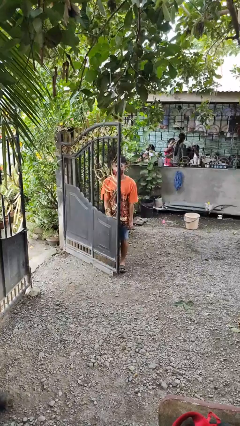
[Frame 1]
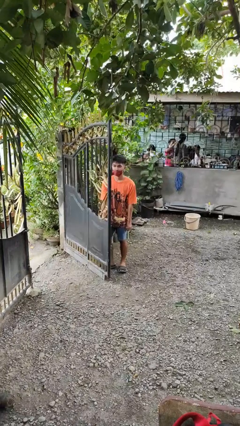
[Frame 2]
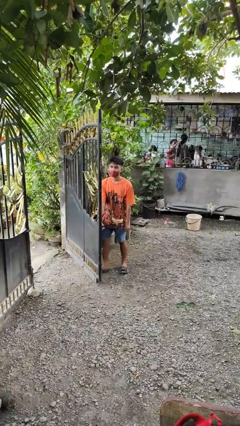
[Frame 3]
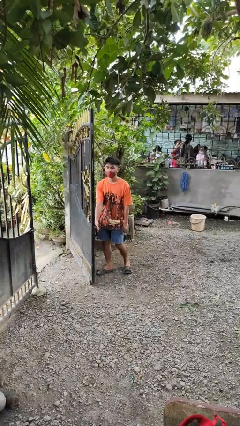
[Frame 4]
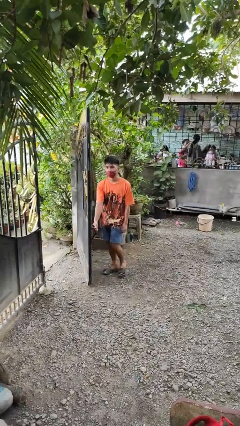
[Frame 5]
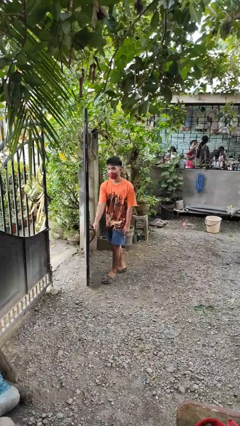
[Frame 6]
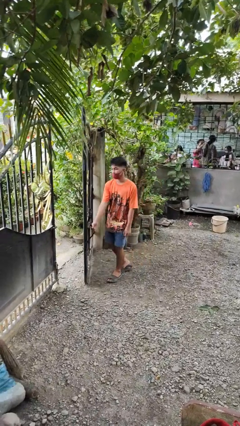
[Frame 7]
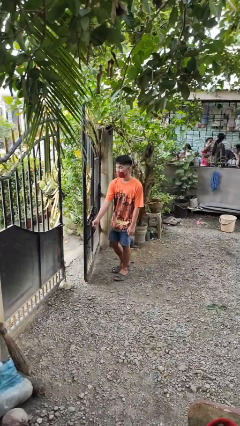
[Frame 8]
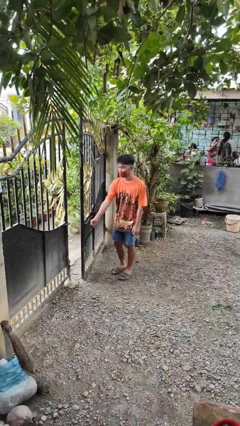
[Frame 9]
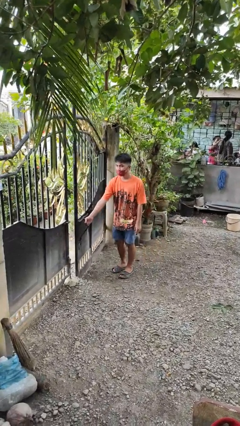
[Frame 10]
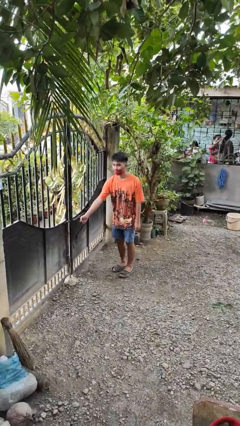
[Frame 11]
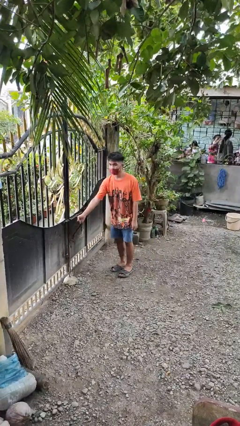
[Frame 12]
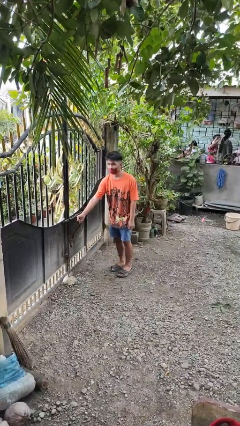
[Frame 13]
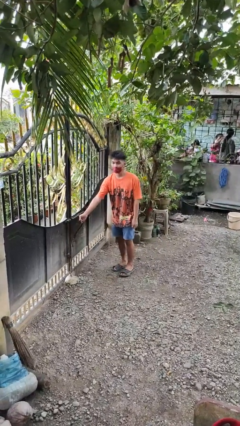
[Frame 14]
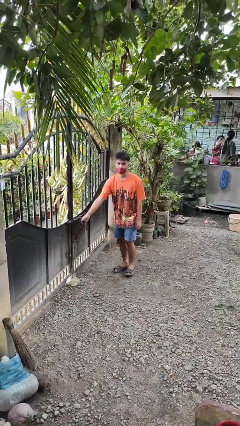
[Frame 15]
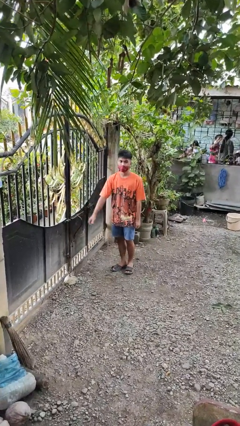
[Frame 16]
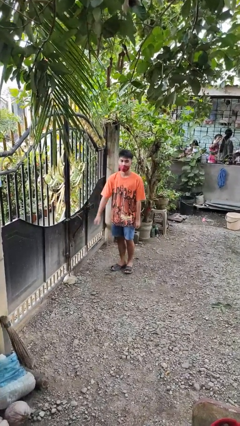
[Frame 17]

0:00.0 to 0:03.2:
person closes gate

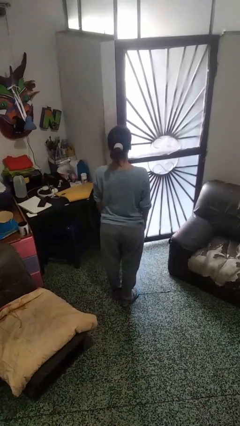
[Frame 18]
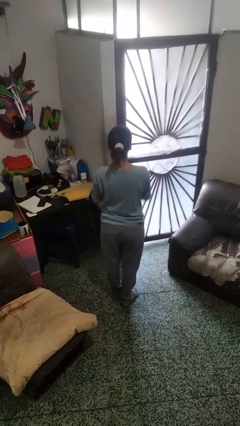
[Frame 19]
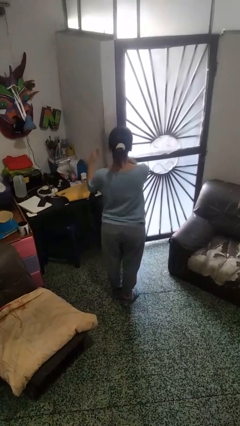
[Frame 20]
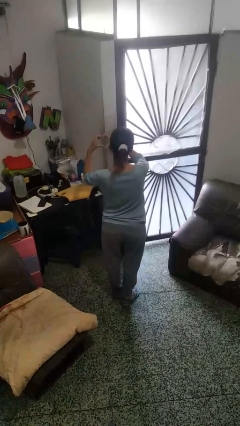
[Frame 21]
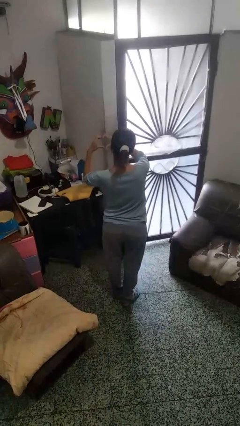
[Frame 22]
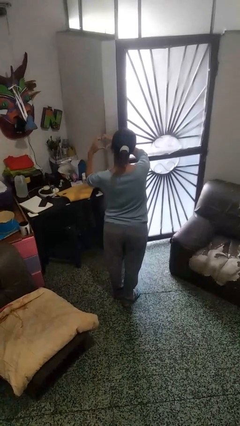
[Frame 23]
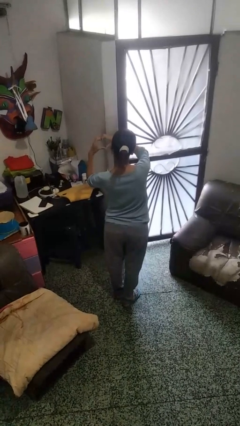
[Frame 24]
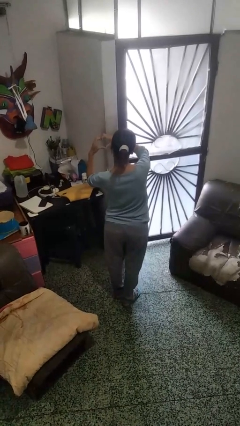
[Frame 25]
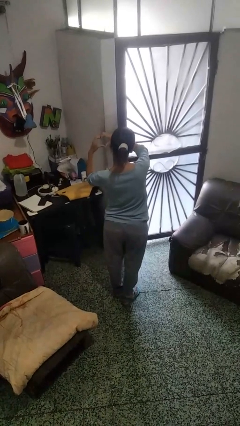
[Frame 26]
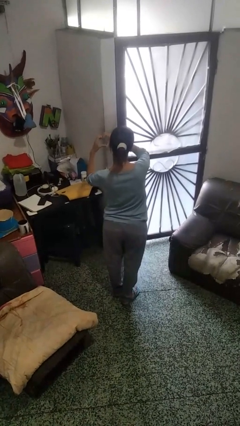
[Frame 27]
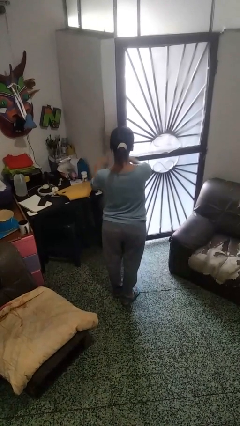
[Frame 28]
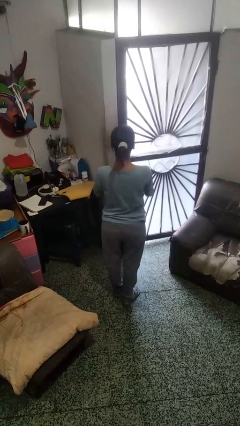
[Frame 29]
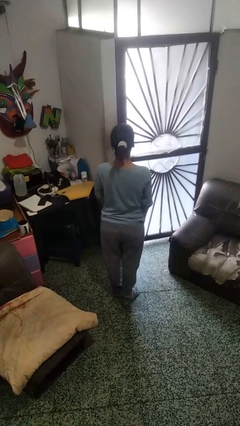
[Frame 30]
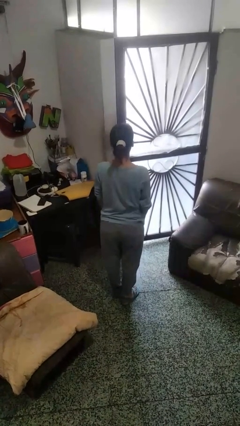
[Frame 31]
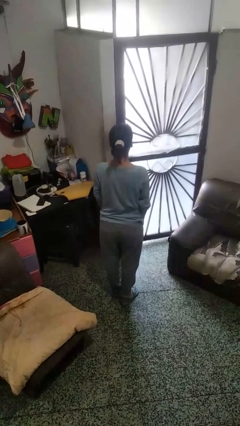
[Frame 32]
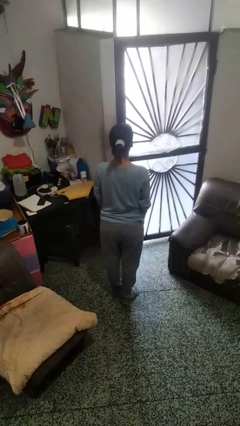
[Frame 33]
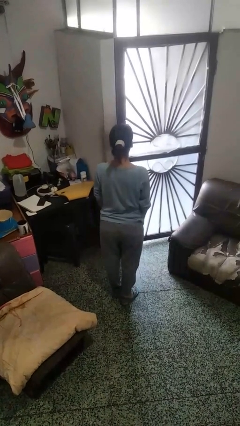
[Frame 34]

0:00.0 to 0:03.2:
person gestures heart

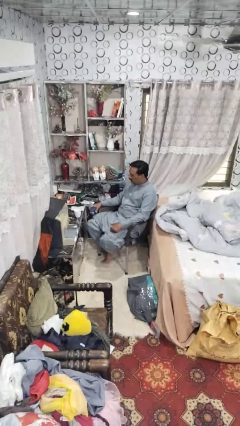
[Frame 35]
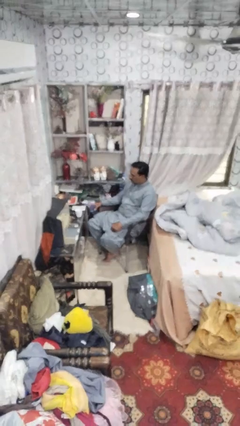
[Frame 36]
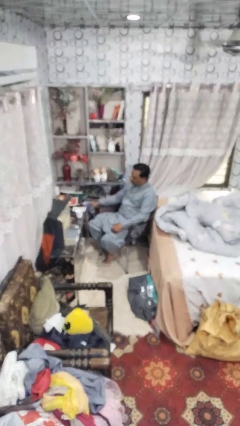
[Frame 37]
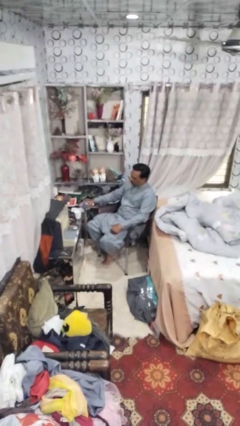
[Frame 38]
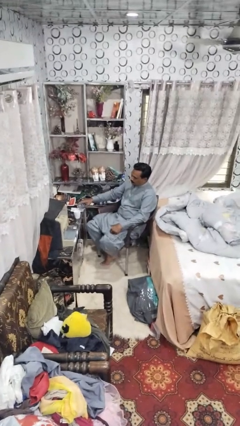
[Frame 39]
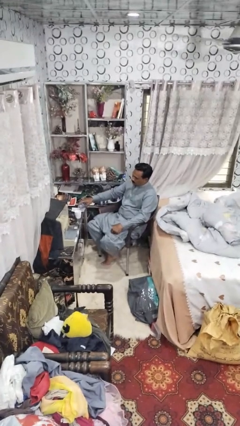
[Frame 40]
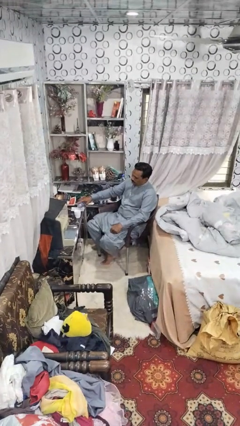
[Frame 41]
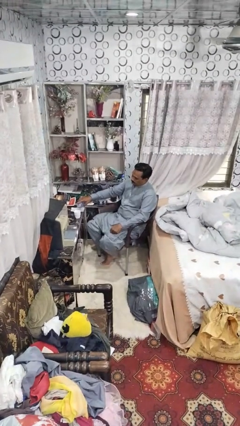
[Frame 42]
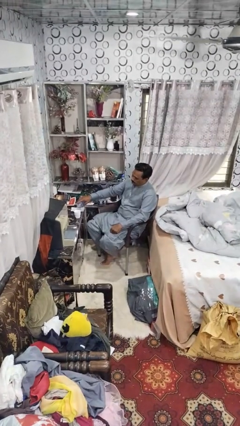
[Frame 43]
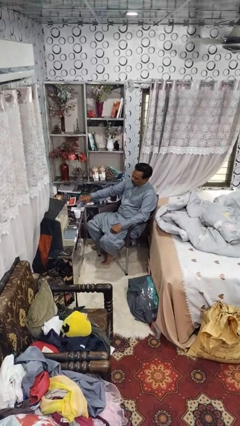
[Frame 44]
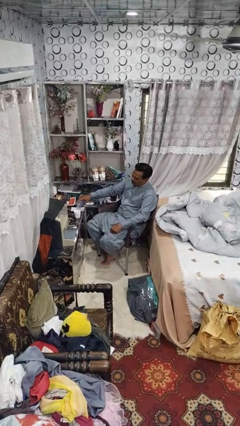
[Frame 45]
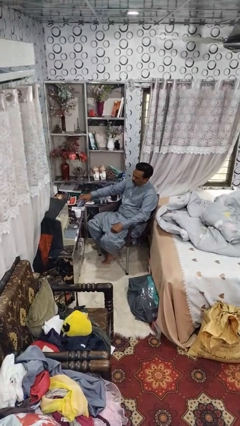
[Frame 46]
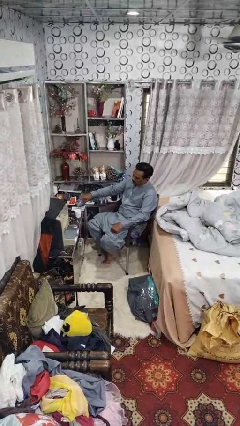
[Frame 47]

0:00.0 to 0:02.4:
person pours liquid into cup

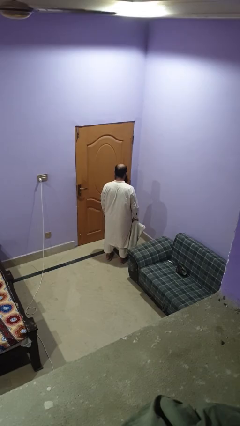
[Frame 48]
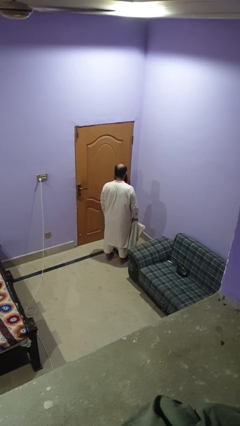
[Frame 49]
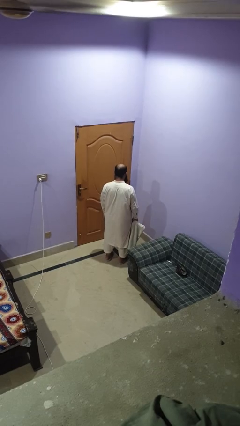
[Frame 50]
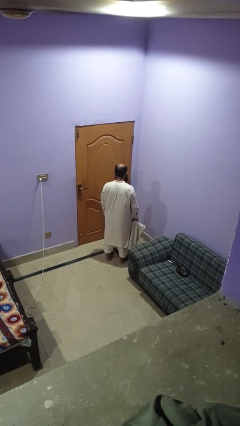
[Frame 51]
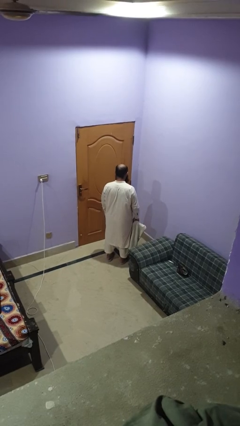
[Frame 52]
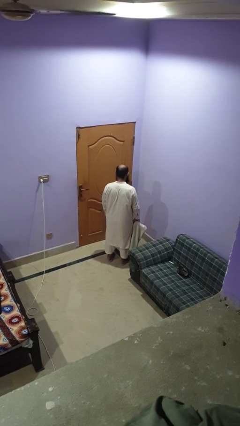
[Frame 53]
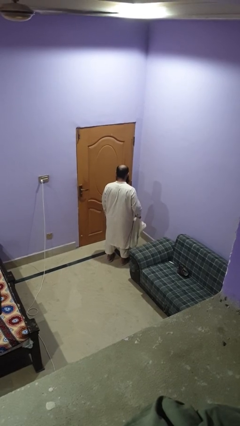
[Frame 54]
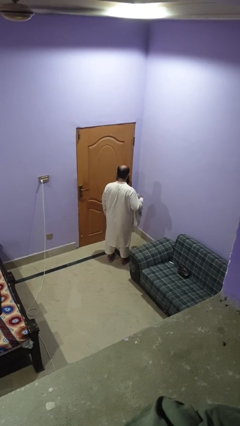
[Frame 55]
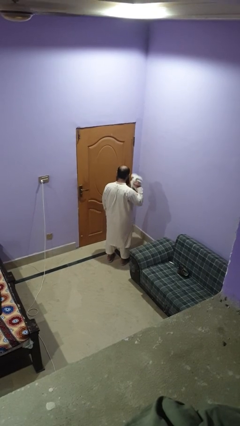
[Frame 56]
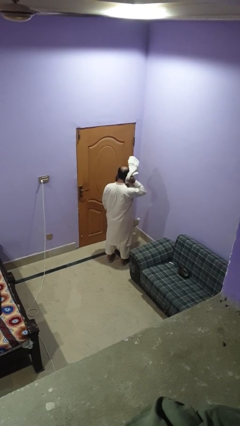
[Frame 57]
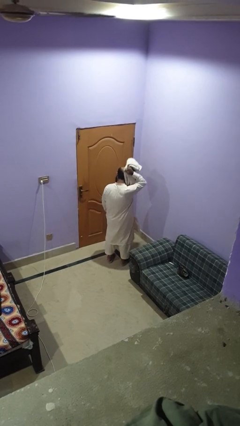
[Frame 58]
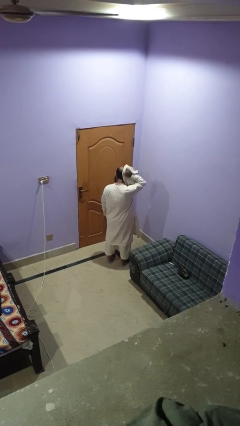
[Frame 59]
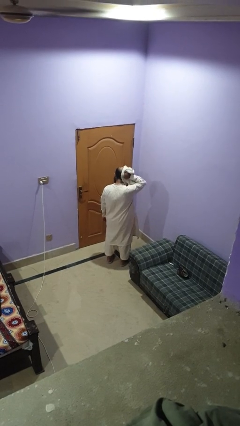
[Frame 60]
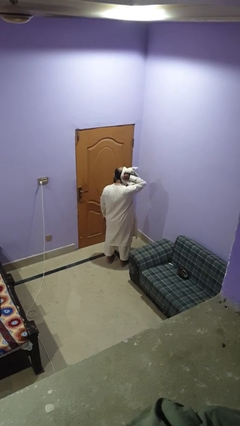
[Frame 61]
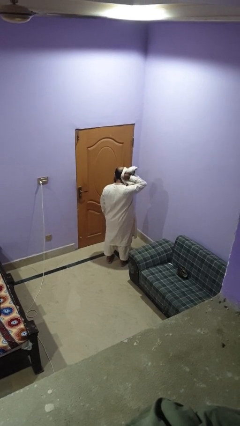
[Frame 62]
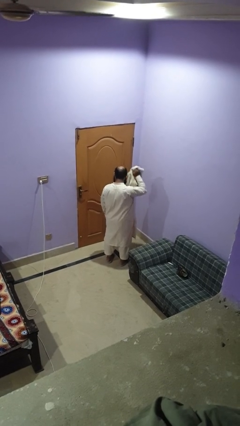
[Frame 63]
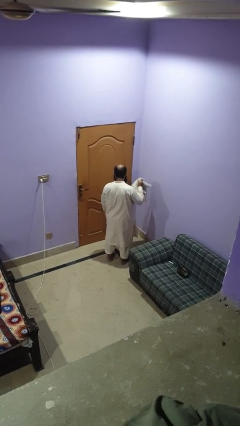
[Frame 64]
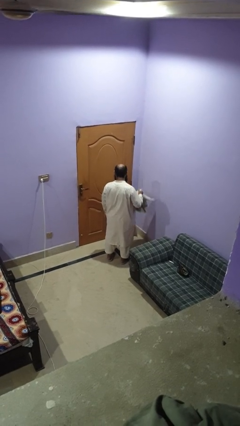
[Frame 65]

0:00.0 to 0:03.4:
person dries hair with towel

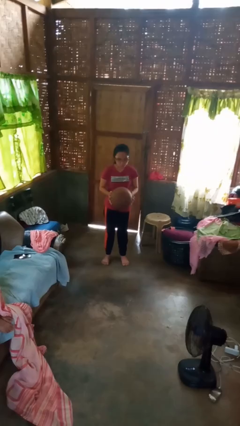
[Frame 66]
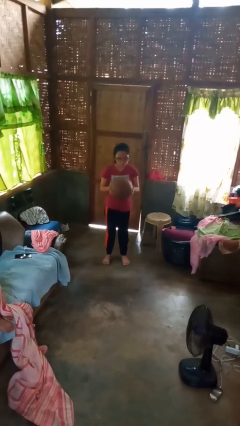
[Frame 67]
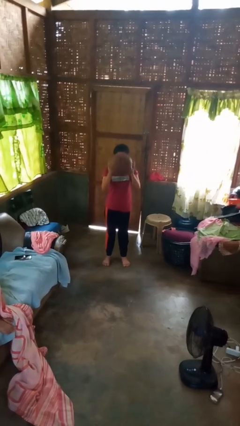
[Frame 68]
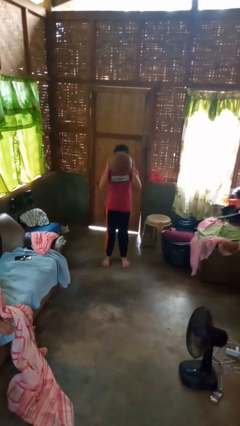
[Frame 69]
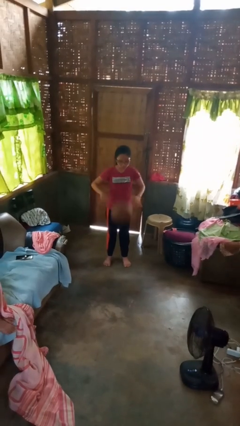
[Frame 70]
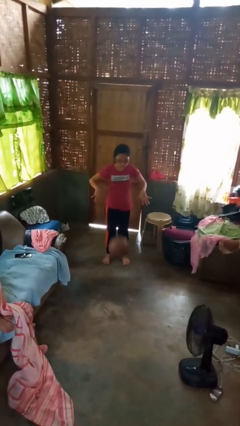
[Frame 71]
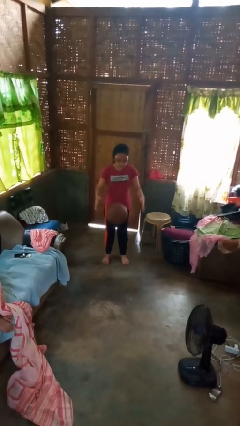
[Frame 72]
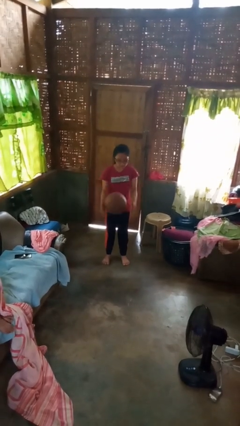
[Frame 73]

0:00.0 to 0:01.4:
person bounces ball on floor

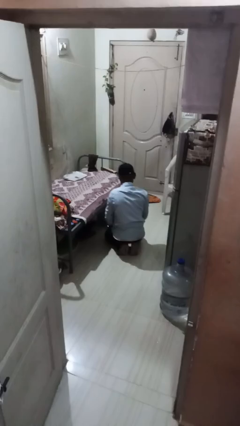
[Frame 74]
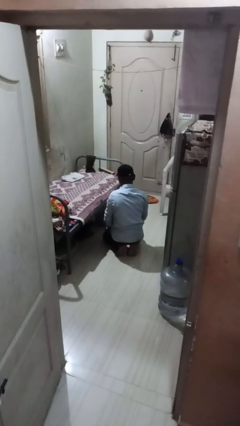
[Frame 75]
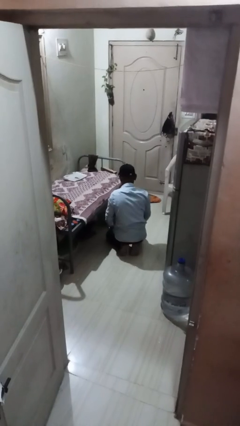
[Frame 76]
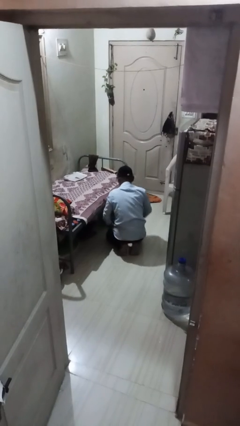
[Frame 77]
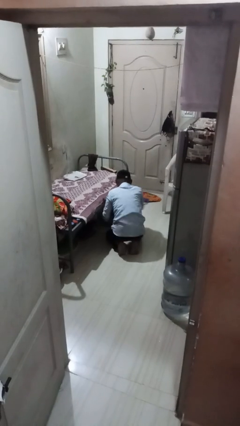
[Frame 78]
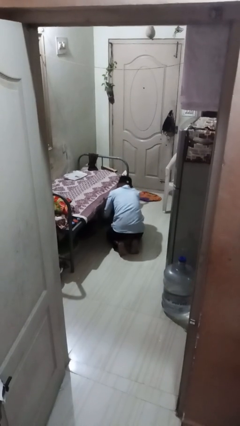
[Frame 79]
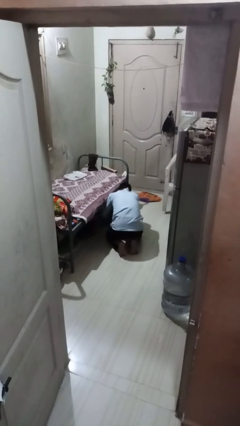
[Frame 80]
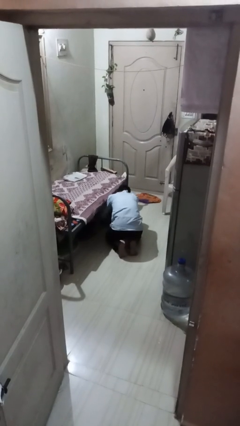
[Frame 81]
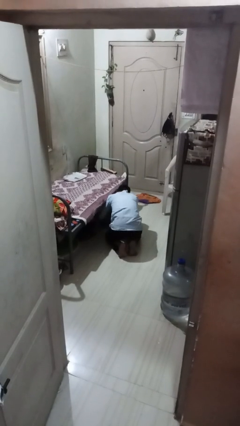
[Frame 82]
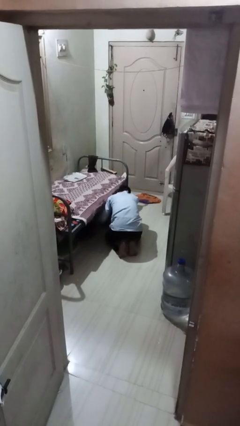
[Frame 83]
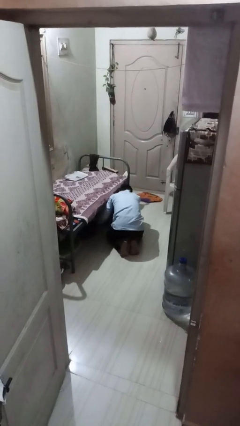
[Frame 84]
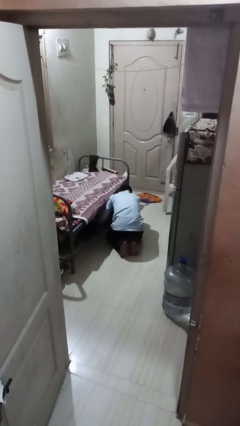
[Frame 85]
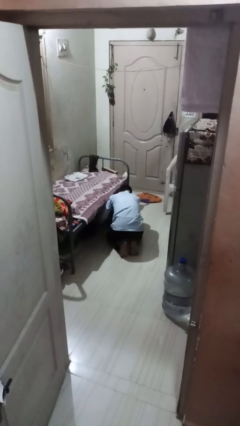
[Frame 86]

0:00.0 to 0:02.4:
person searches under bed

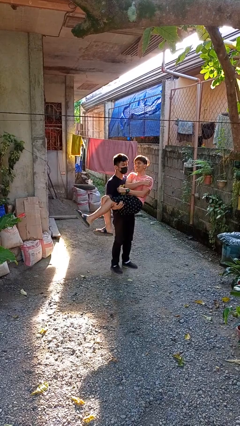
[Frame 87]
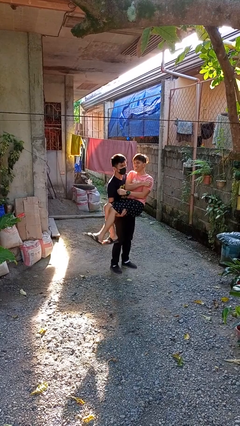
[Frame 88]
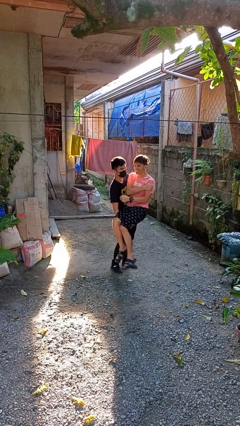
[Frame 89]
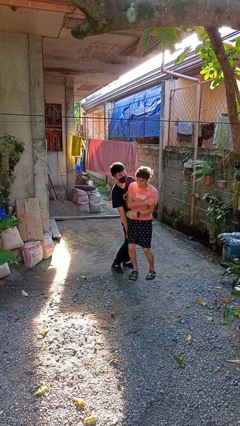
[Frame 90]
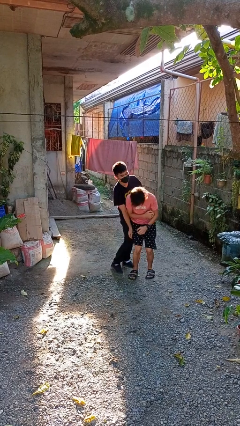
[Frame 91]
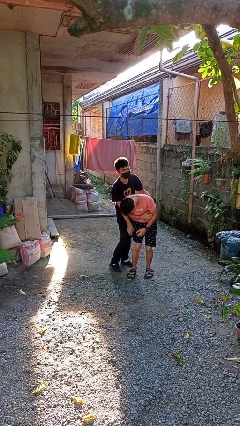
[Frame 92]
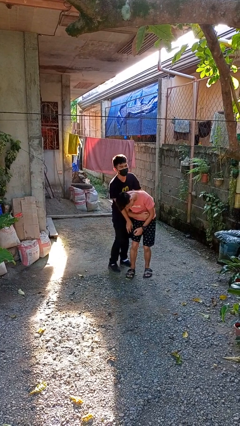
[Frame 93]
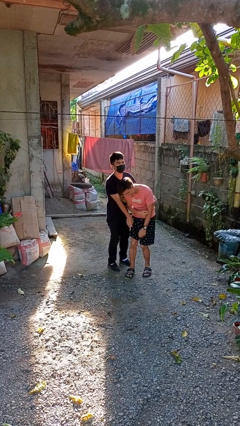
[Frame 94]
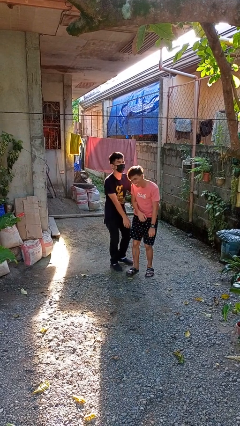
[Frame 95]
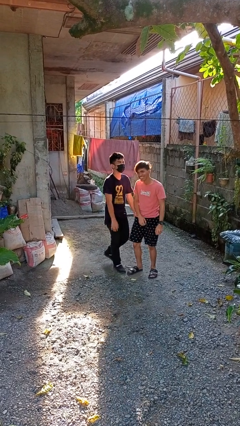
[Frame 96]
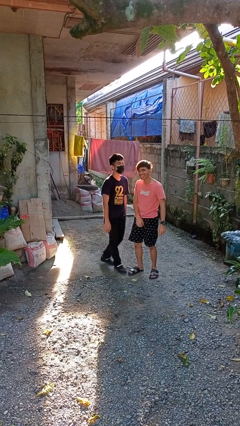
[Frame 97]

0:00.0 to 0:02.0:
person puts down person
